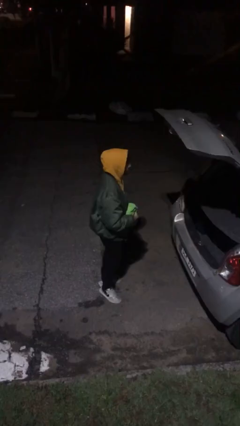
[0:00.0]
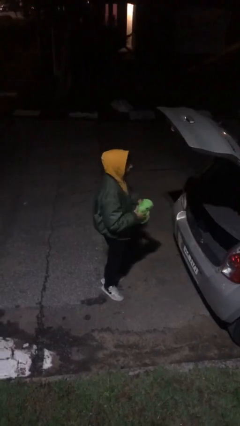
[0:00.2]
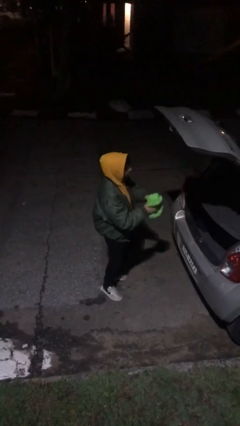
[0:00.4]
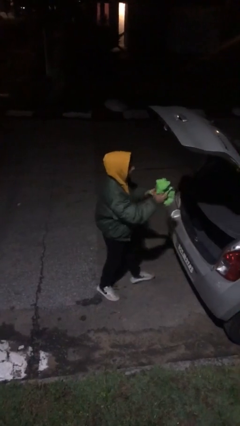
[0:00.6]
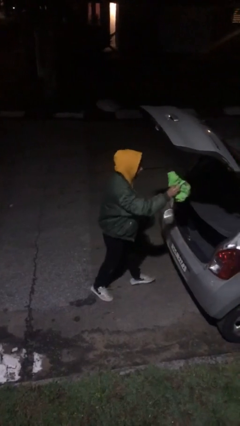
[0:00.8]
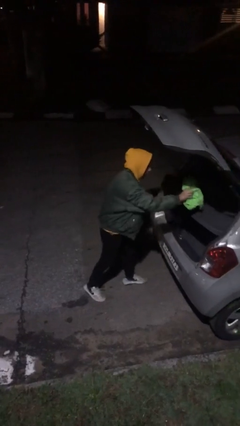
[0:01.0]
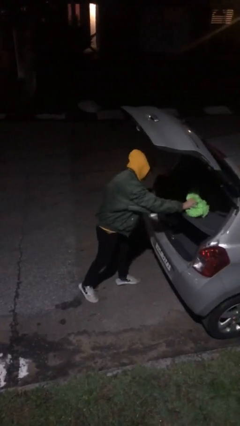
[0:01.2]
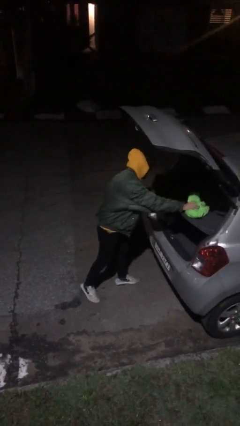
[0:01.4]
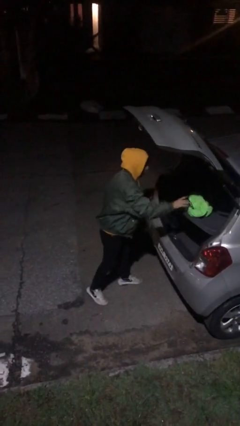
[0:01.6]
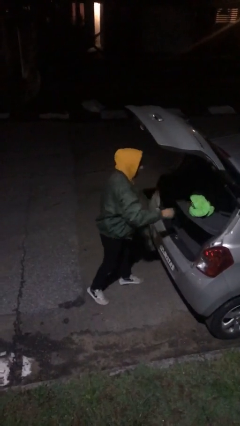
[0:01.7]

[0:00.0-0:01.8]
person loads car

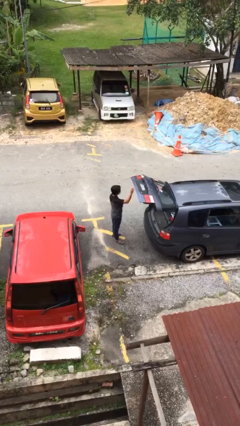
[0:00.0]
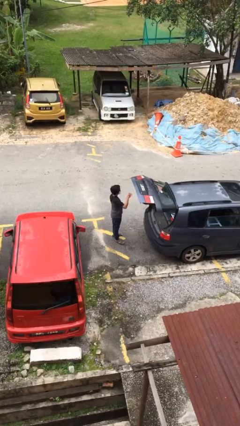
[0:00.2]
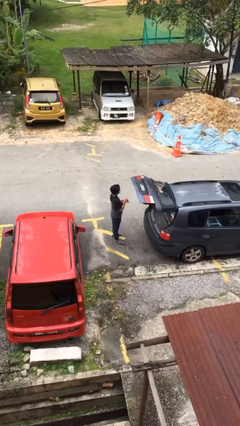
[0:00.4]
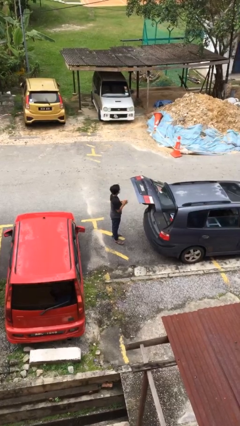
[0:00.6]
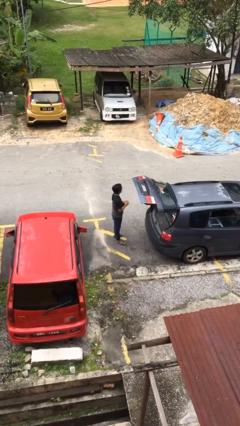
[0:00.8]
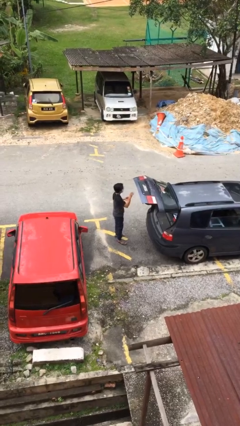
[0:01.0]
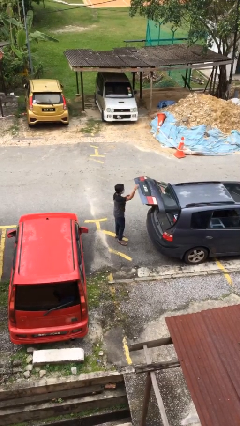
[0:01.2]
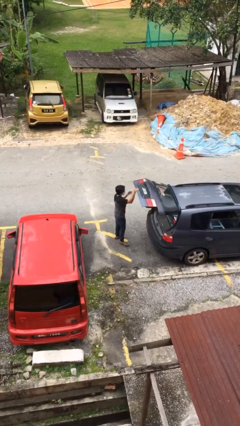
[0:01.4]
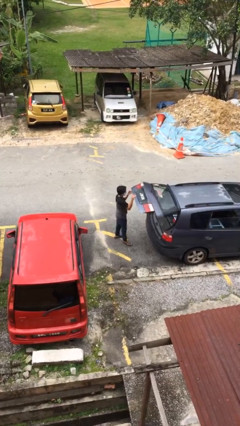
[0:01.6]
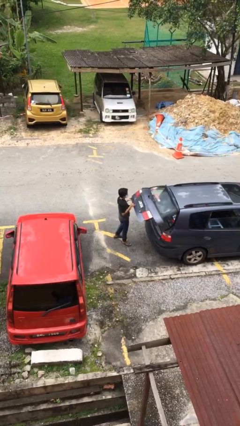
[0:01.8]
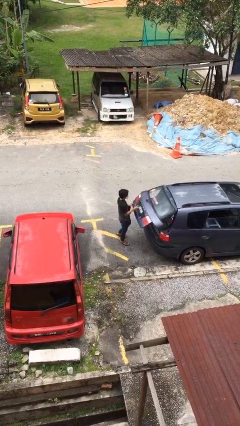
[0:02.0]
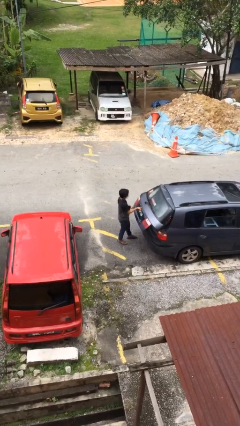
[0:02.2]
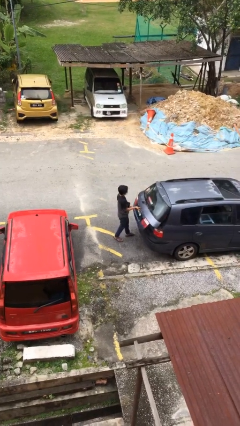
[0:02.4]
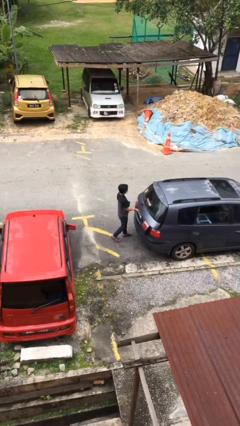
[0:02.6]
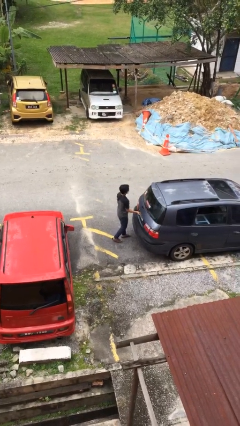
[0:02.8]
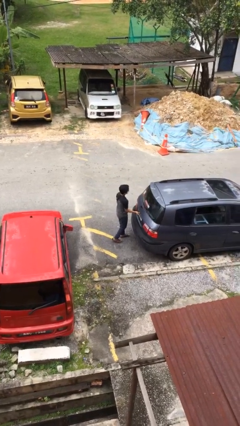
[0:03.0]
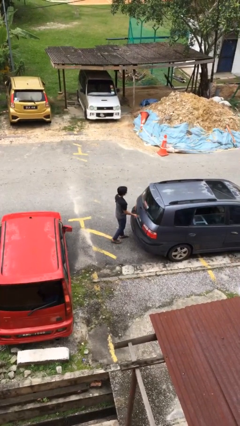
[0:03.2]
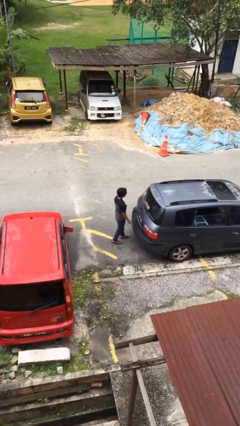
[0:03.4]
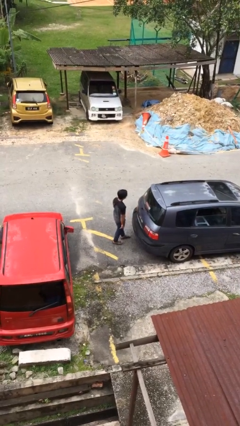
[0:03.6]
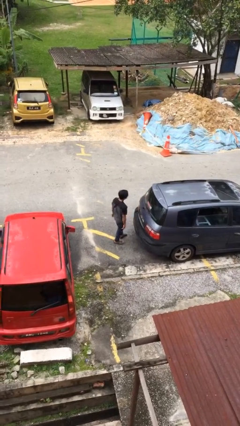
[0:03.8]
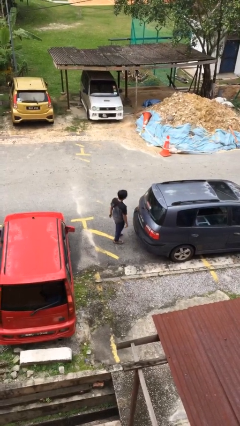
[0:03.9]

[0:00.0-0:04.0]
person closes car trunk

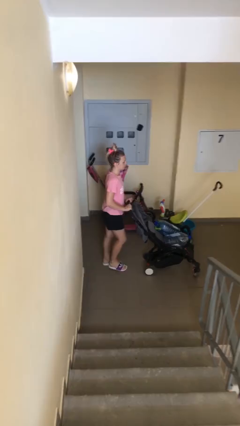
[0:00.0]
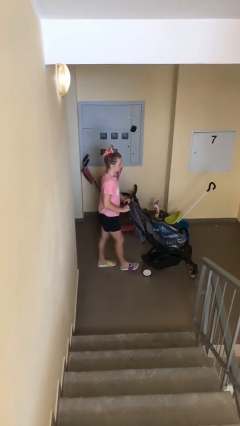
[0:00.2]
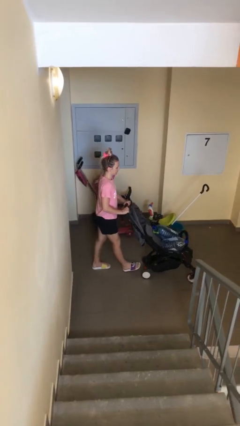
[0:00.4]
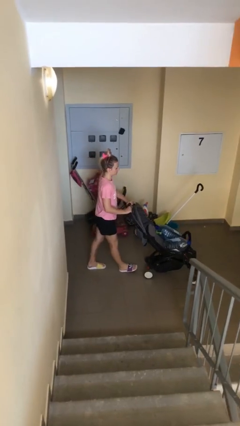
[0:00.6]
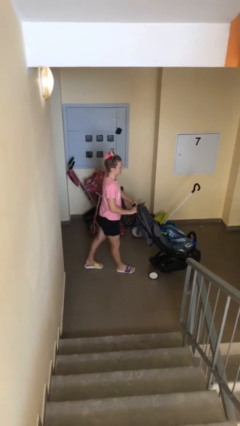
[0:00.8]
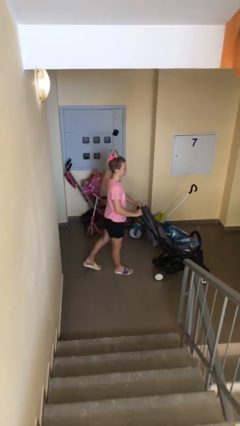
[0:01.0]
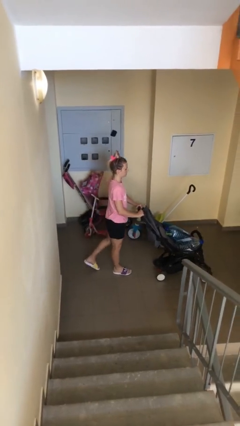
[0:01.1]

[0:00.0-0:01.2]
person pushes wheeled cart

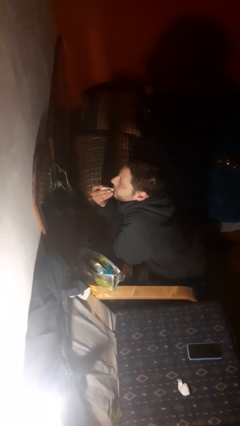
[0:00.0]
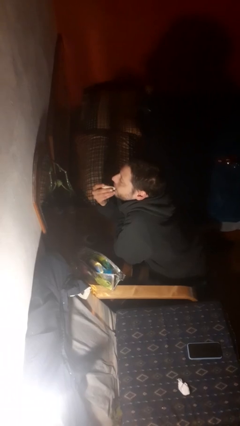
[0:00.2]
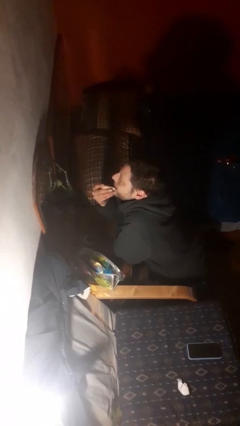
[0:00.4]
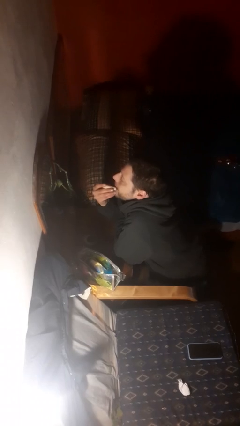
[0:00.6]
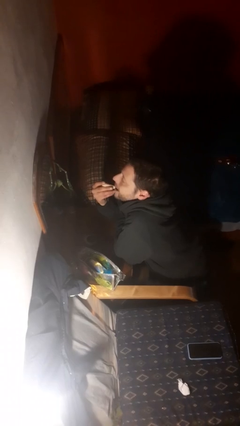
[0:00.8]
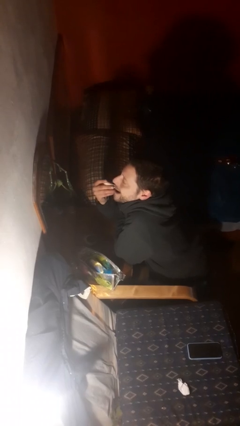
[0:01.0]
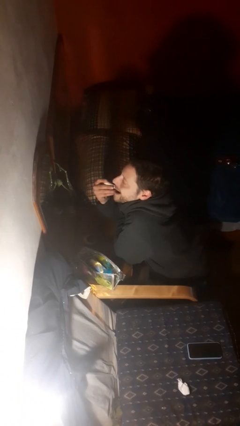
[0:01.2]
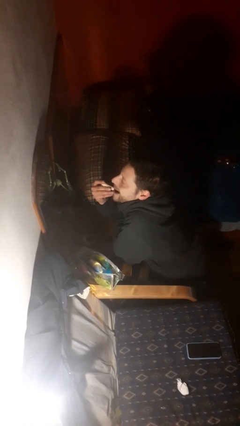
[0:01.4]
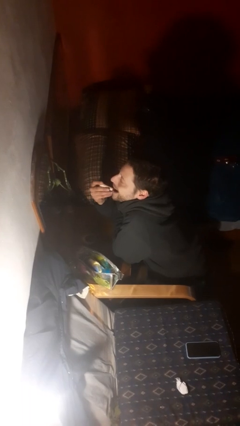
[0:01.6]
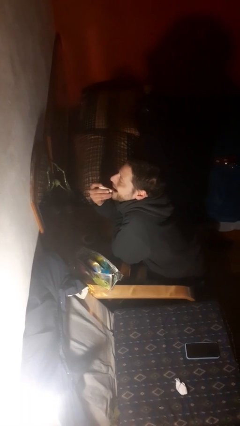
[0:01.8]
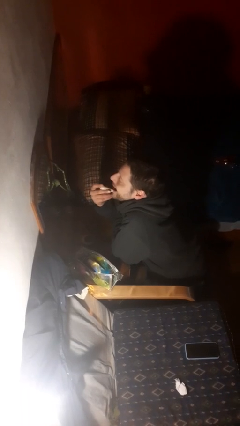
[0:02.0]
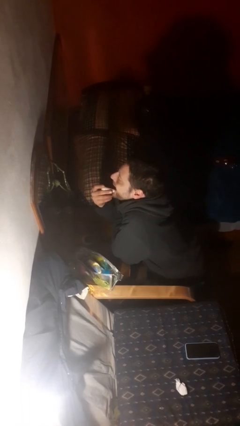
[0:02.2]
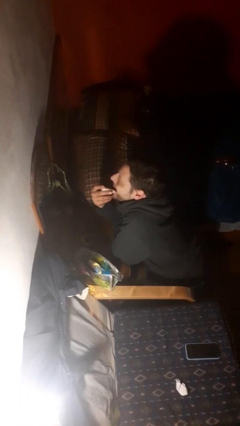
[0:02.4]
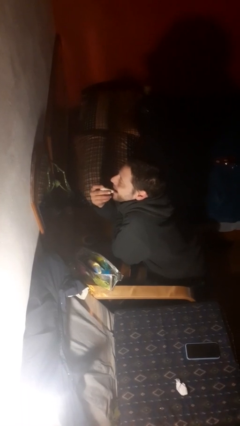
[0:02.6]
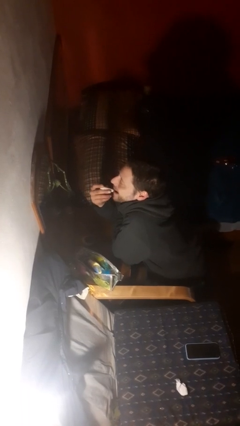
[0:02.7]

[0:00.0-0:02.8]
person applies lip makeup

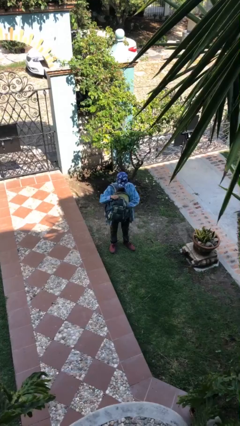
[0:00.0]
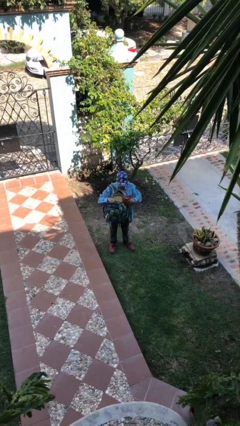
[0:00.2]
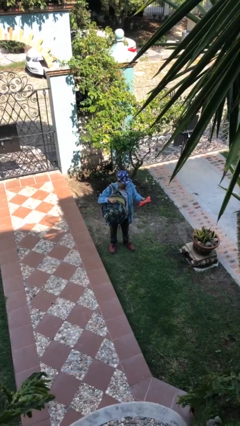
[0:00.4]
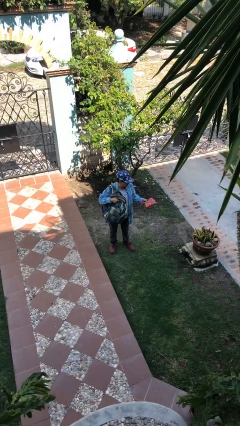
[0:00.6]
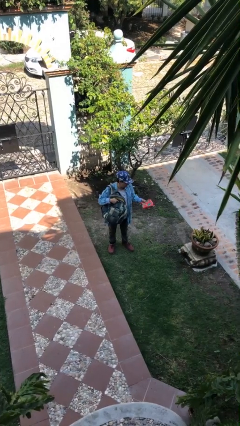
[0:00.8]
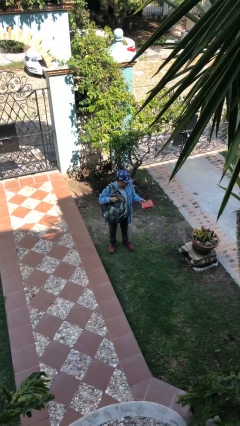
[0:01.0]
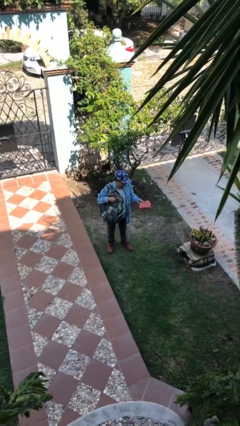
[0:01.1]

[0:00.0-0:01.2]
person takes object from backpack

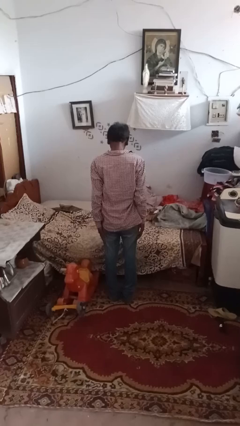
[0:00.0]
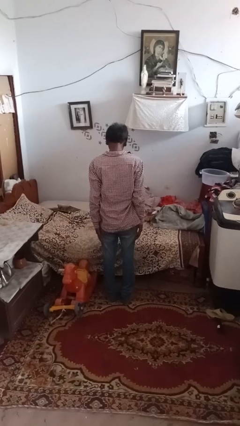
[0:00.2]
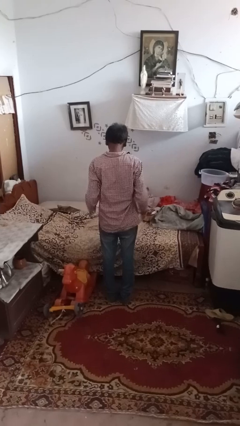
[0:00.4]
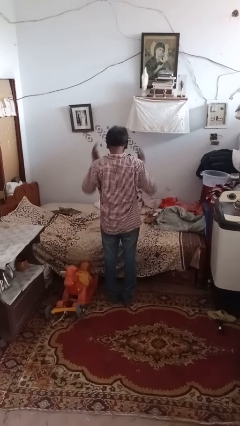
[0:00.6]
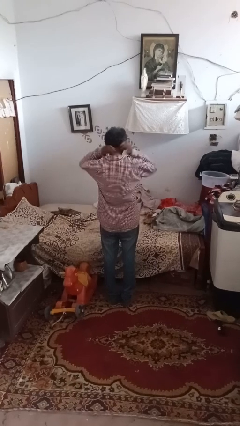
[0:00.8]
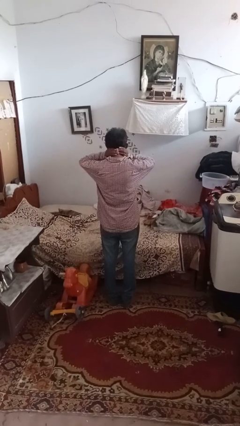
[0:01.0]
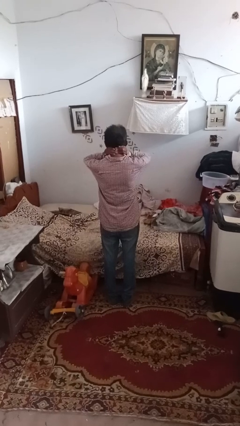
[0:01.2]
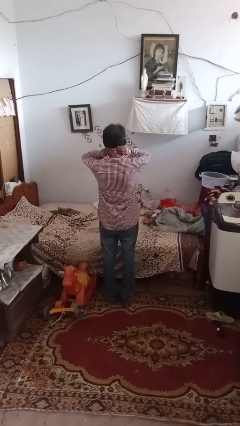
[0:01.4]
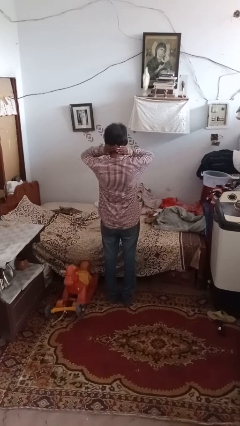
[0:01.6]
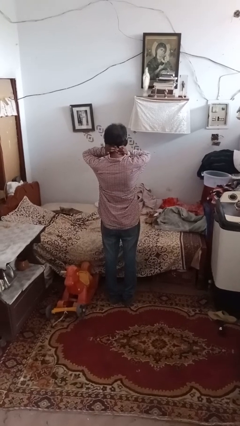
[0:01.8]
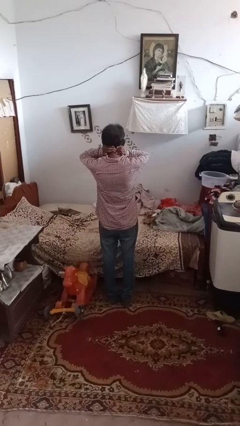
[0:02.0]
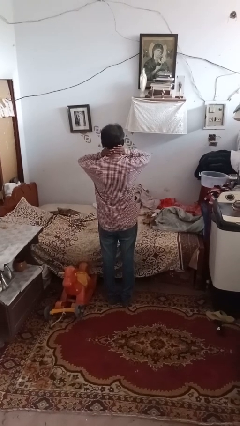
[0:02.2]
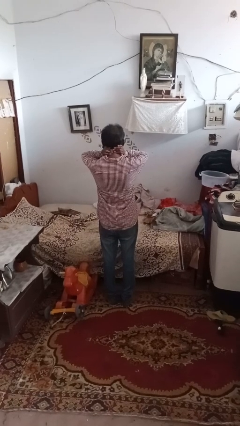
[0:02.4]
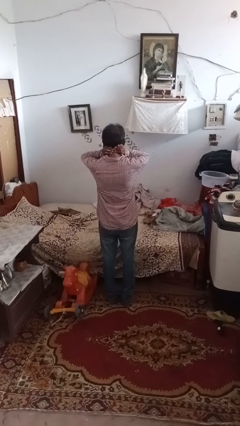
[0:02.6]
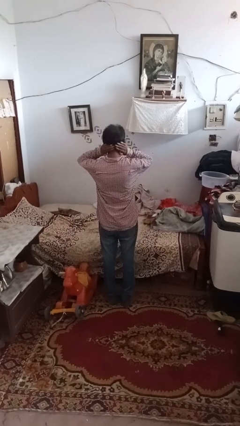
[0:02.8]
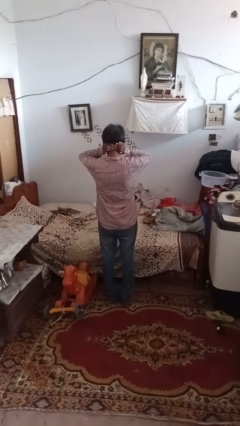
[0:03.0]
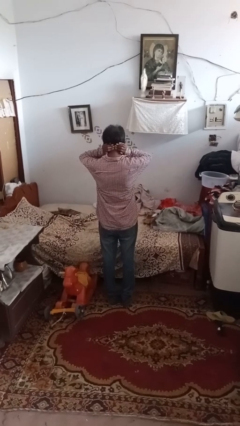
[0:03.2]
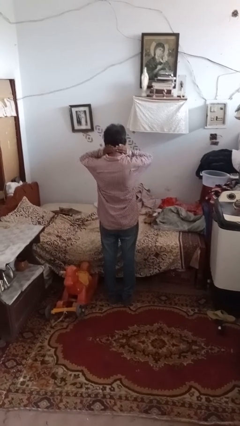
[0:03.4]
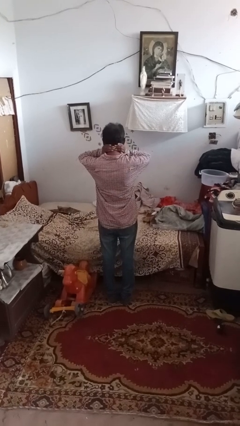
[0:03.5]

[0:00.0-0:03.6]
person rubs neck

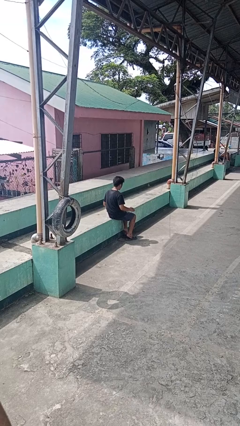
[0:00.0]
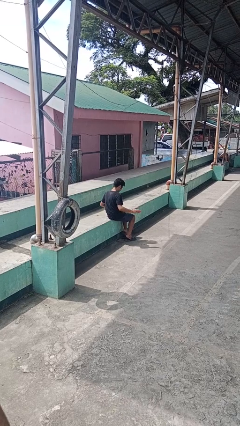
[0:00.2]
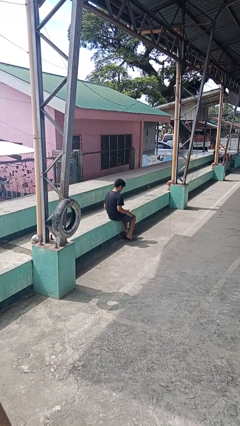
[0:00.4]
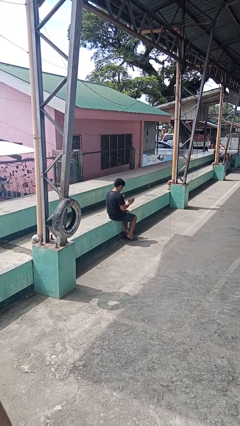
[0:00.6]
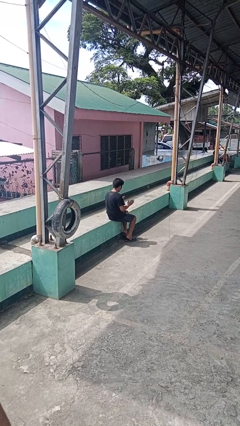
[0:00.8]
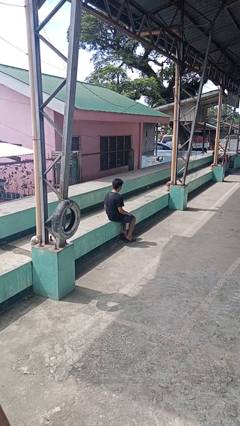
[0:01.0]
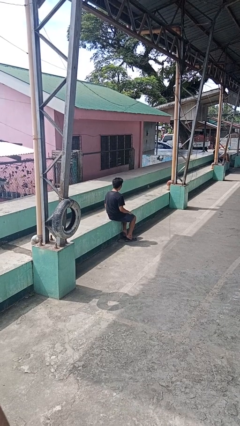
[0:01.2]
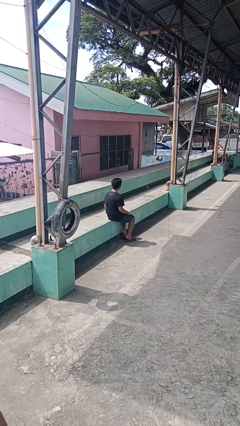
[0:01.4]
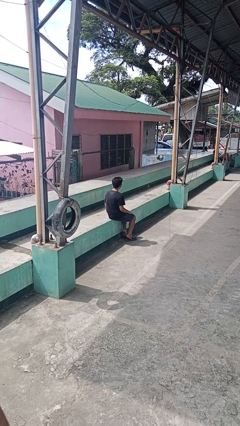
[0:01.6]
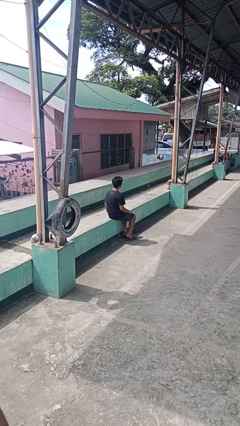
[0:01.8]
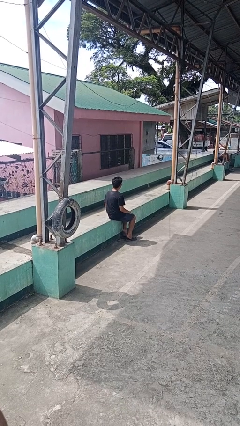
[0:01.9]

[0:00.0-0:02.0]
person slaps hands on thighs

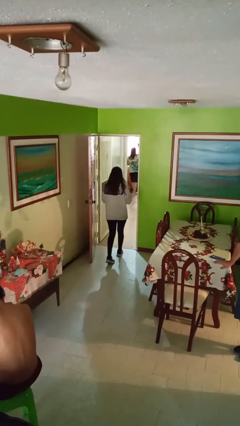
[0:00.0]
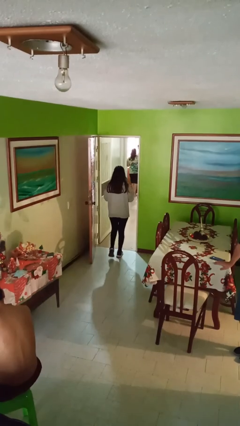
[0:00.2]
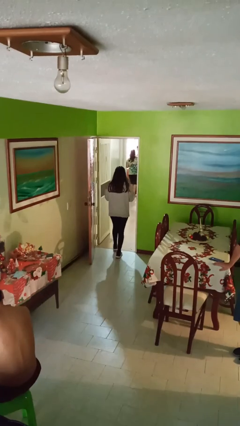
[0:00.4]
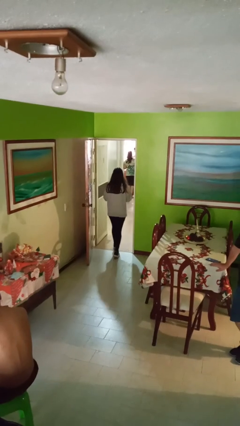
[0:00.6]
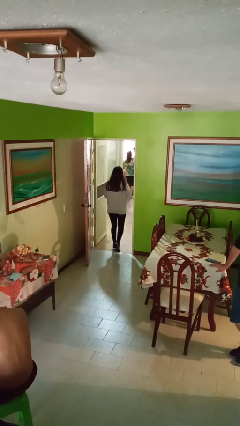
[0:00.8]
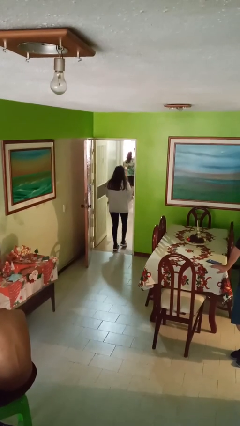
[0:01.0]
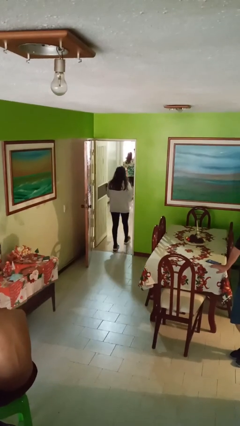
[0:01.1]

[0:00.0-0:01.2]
person exits scene through structure
